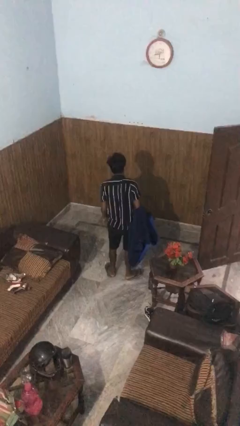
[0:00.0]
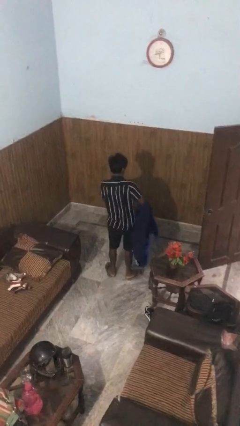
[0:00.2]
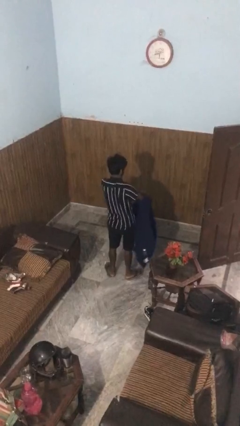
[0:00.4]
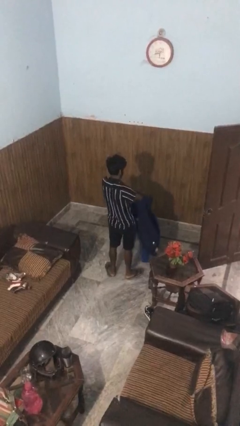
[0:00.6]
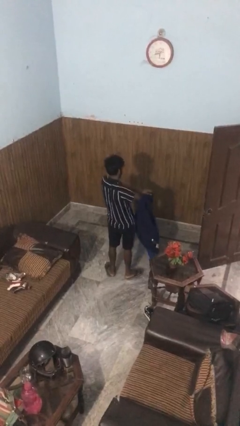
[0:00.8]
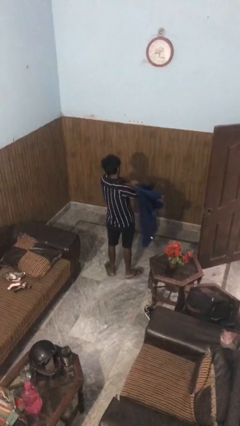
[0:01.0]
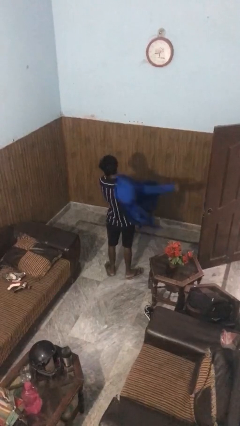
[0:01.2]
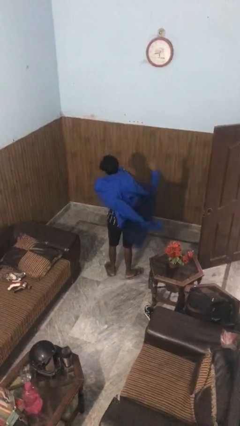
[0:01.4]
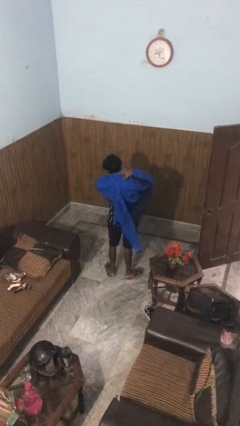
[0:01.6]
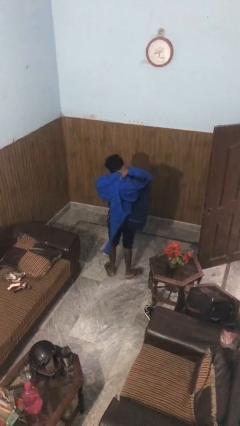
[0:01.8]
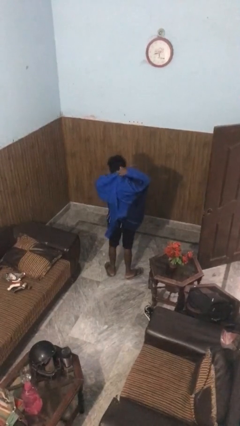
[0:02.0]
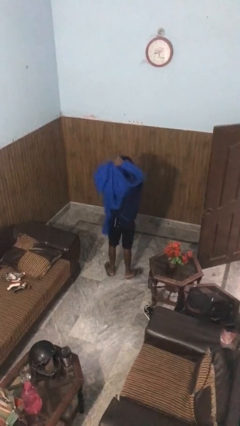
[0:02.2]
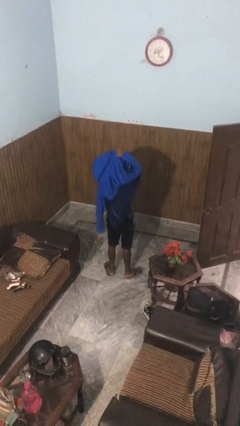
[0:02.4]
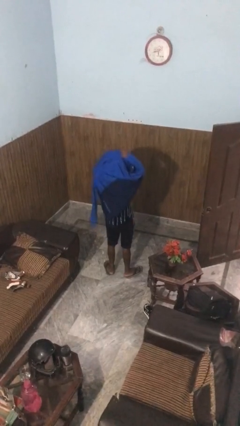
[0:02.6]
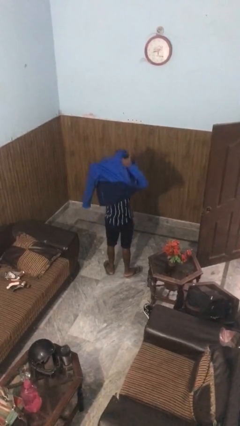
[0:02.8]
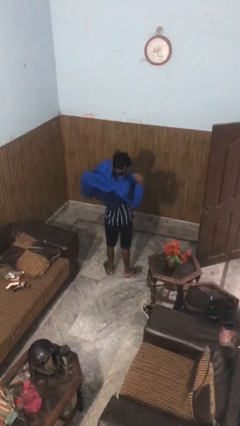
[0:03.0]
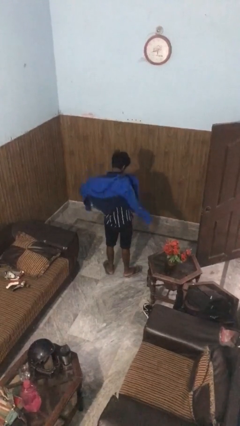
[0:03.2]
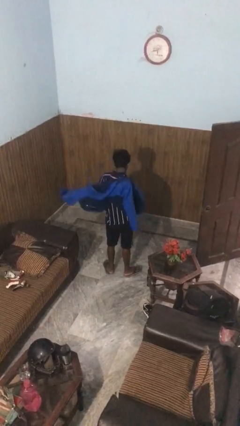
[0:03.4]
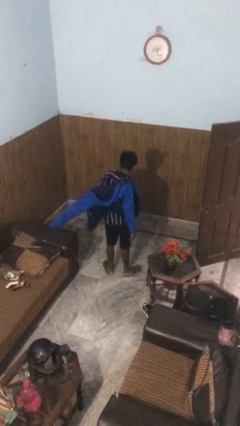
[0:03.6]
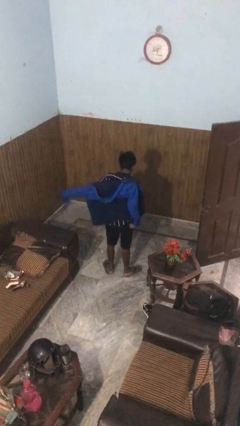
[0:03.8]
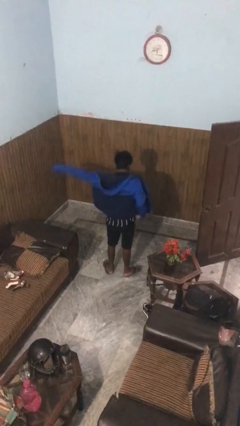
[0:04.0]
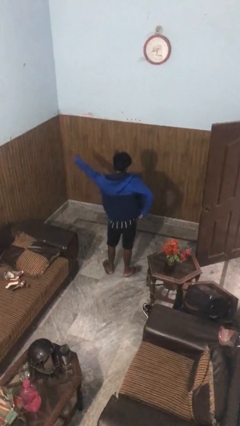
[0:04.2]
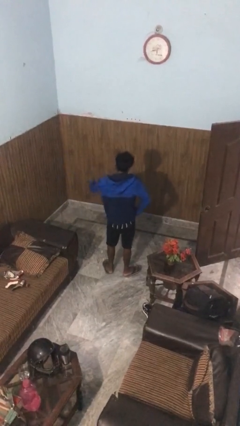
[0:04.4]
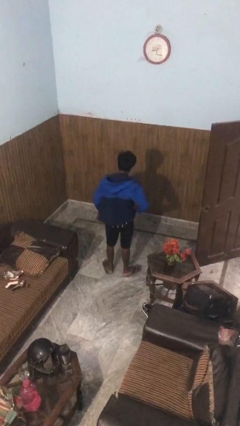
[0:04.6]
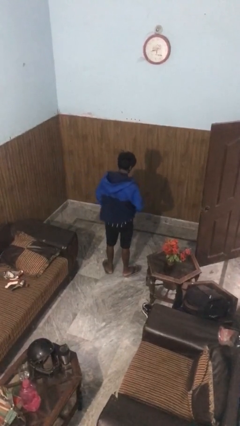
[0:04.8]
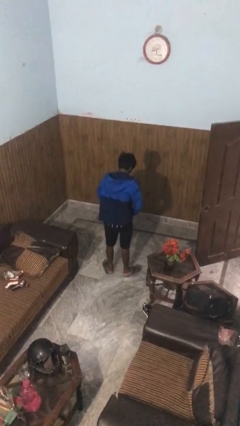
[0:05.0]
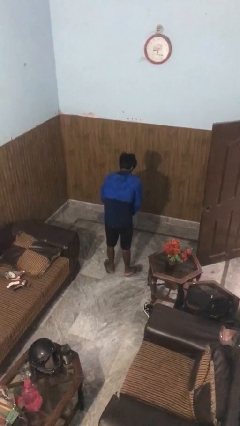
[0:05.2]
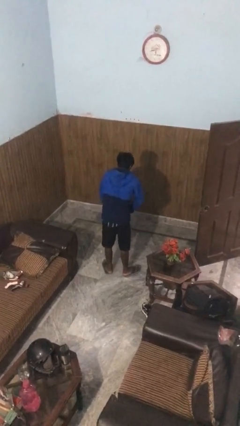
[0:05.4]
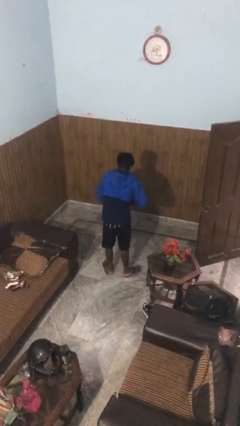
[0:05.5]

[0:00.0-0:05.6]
person puts on jacket

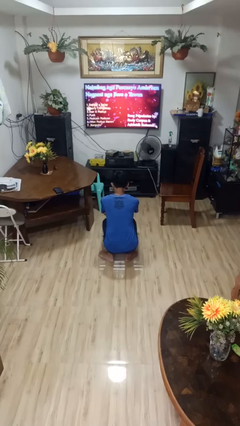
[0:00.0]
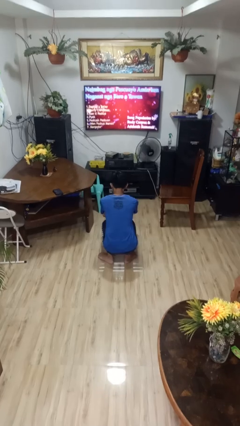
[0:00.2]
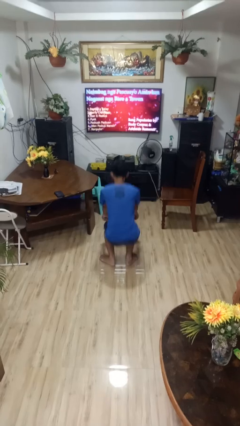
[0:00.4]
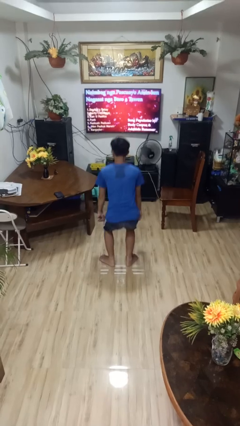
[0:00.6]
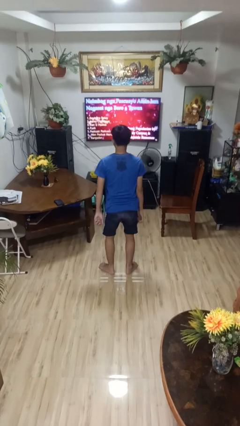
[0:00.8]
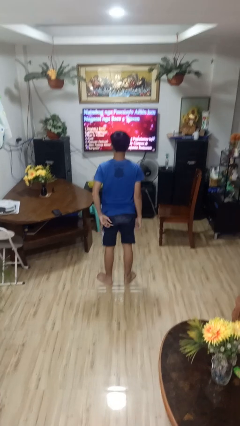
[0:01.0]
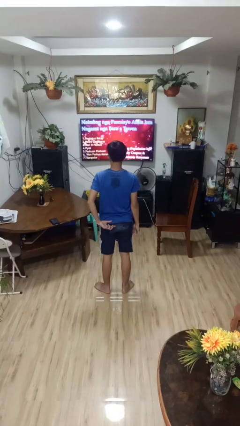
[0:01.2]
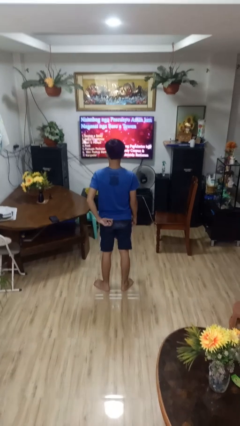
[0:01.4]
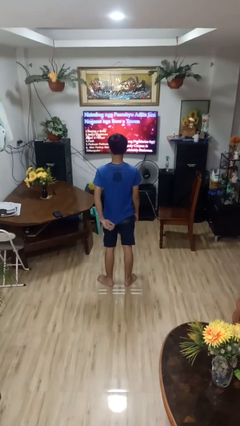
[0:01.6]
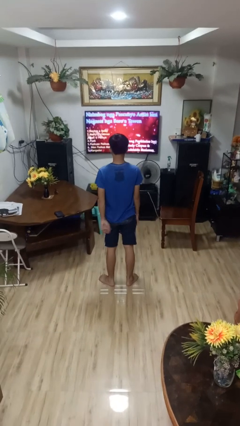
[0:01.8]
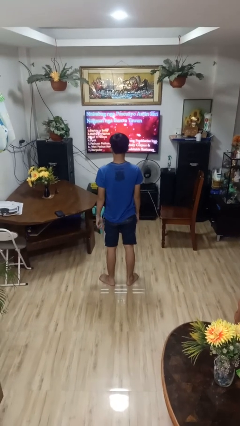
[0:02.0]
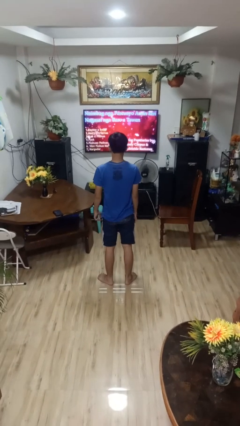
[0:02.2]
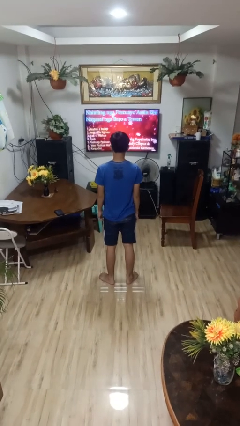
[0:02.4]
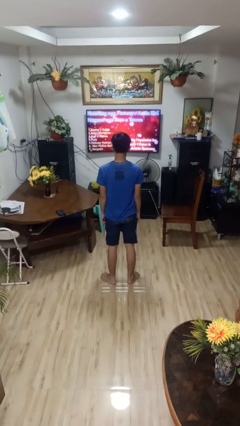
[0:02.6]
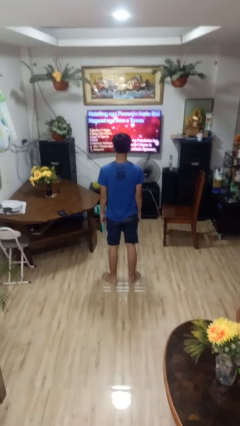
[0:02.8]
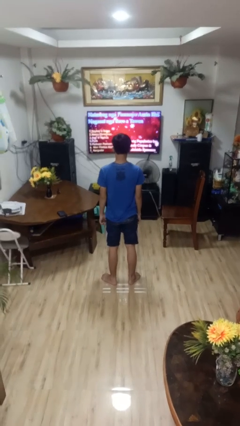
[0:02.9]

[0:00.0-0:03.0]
person stands up

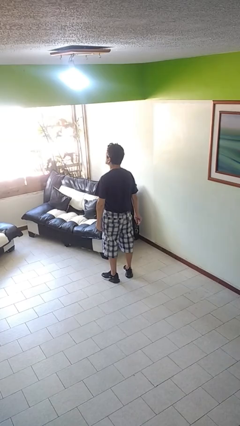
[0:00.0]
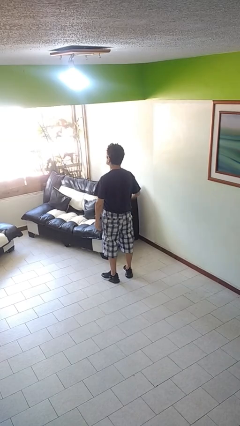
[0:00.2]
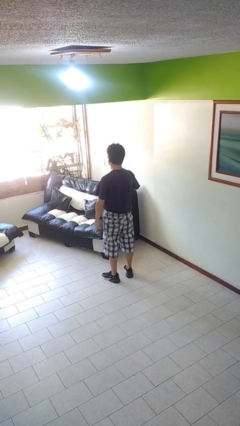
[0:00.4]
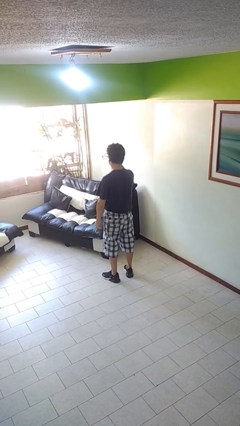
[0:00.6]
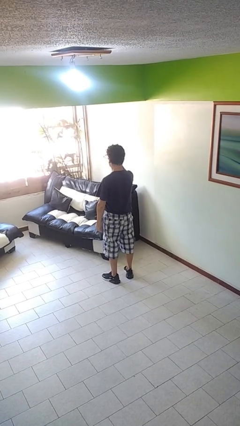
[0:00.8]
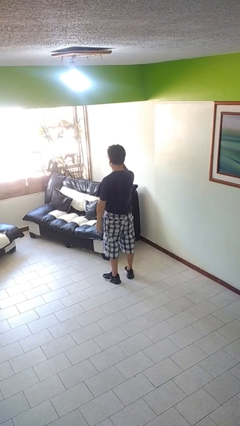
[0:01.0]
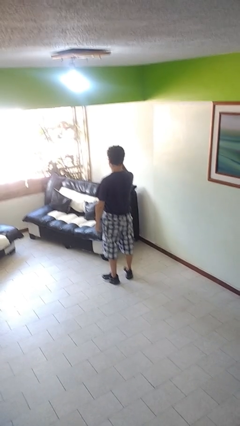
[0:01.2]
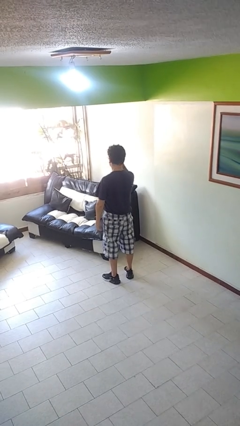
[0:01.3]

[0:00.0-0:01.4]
person puts on glasses

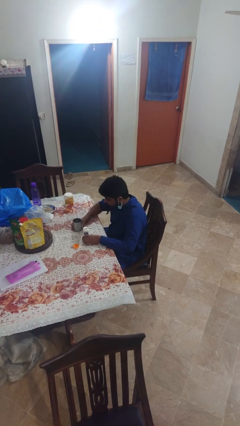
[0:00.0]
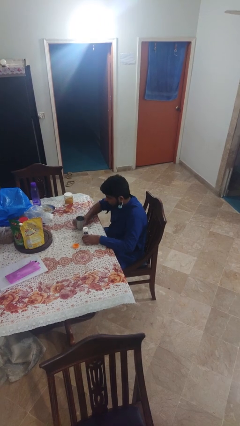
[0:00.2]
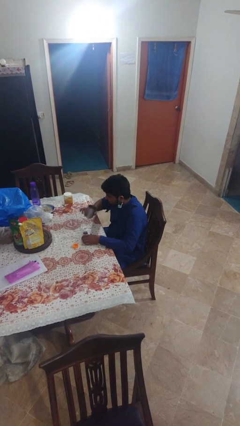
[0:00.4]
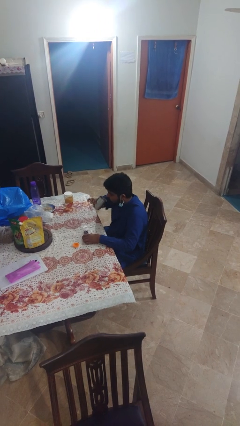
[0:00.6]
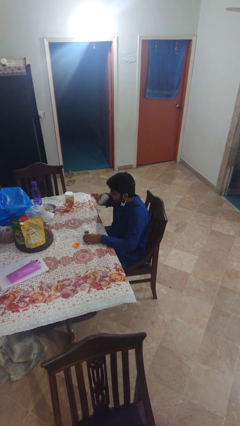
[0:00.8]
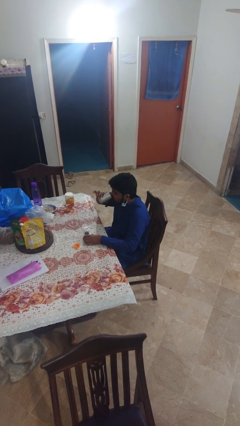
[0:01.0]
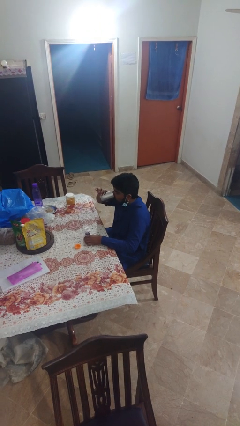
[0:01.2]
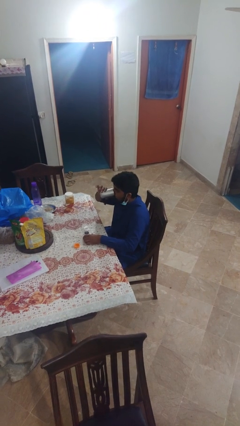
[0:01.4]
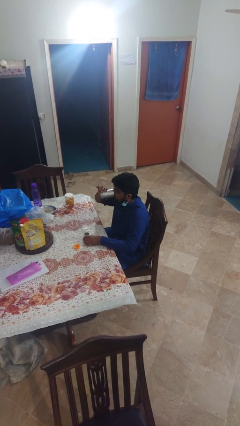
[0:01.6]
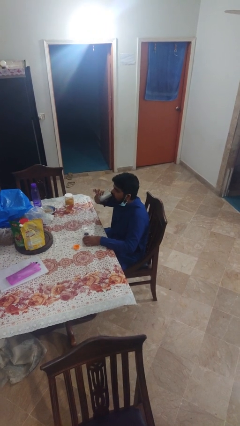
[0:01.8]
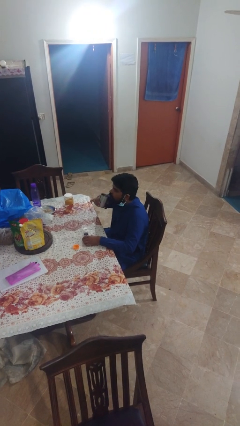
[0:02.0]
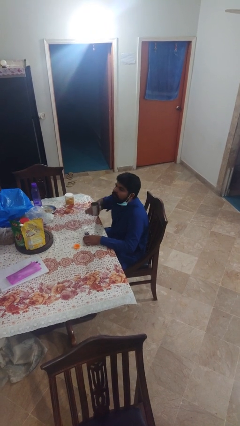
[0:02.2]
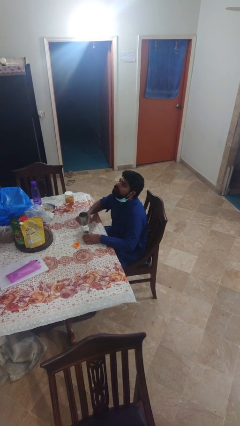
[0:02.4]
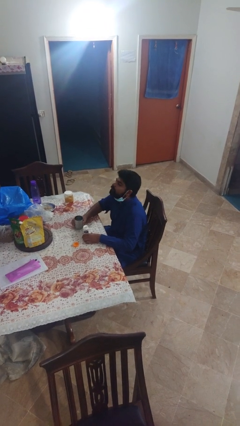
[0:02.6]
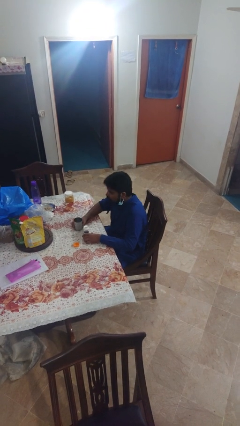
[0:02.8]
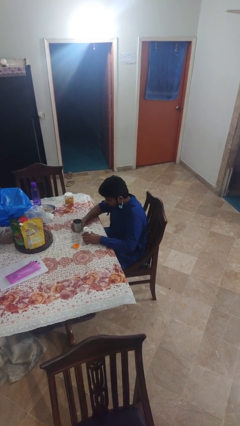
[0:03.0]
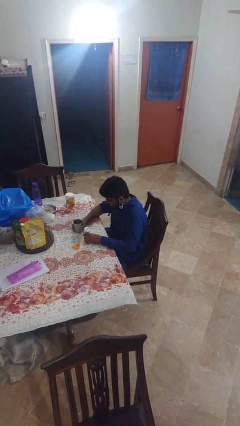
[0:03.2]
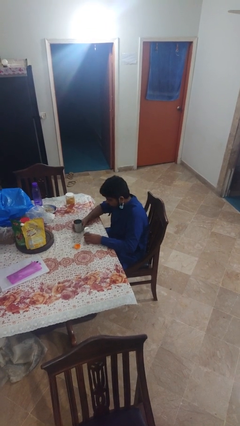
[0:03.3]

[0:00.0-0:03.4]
person drinks from cup

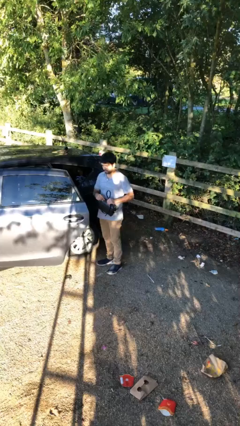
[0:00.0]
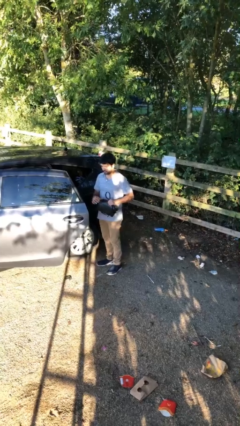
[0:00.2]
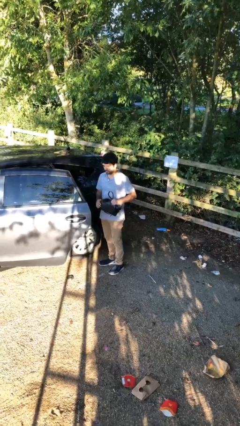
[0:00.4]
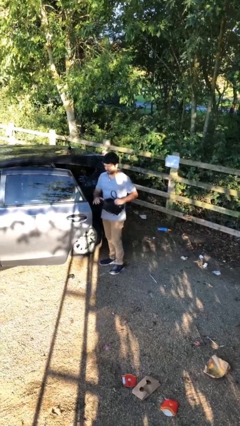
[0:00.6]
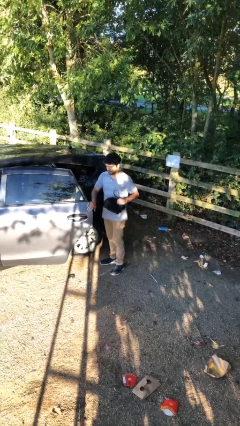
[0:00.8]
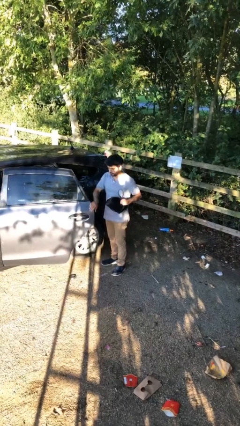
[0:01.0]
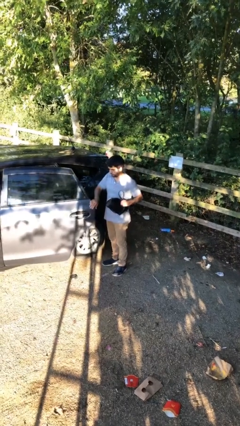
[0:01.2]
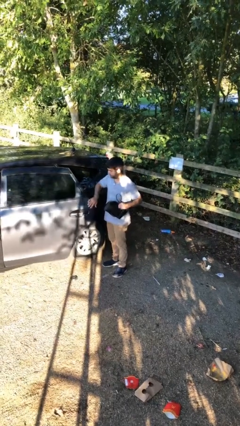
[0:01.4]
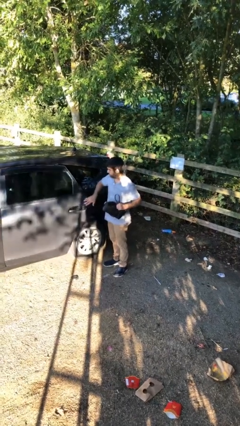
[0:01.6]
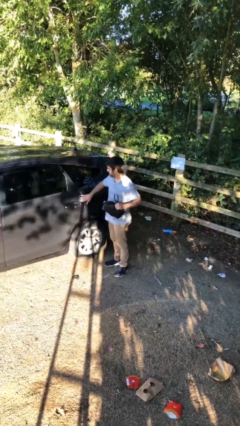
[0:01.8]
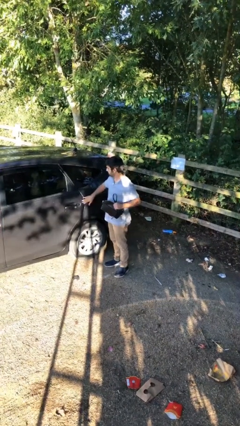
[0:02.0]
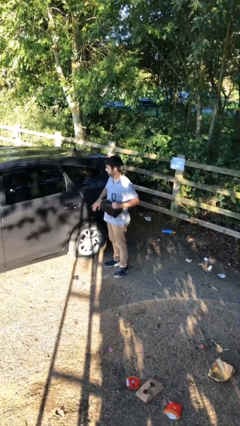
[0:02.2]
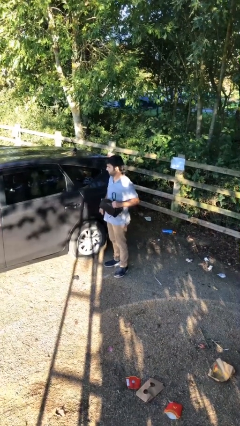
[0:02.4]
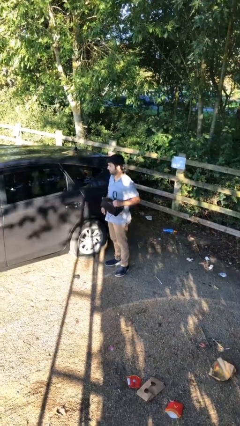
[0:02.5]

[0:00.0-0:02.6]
person closes car door

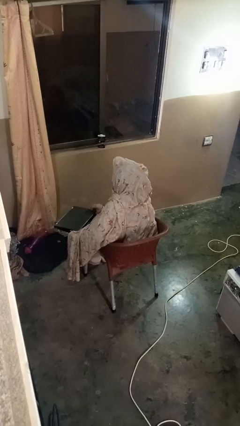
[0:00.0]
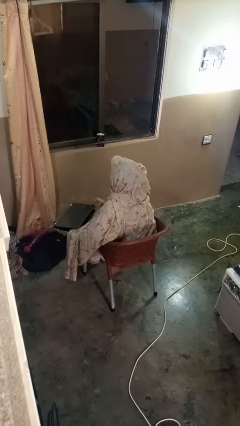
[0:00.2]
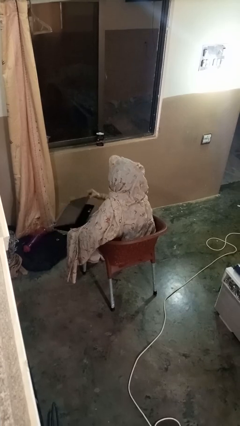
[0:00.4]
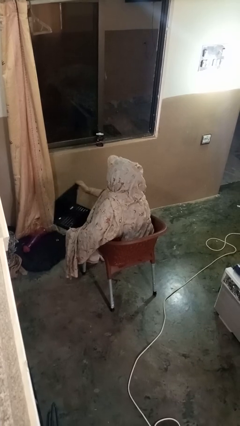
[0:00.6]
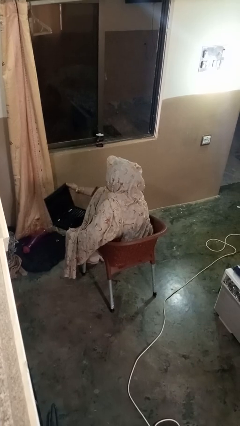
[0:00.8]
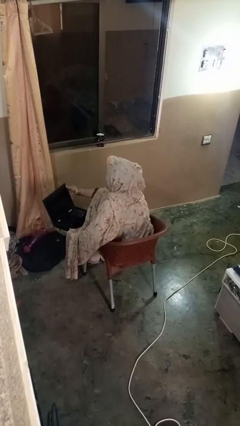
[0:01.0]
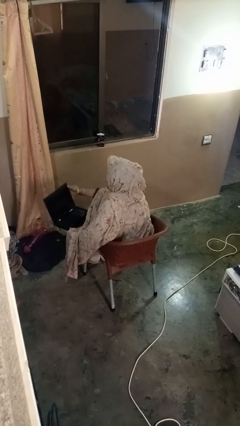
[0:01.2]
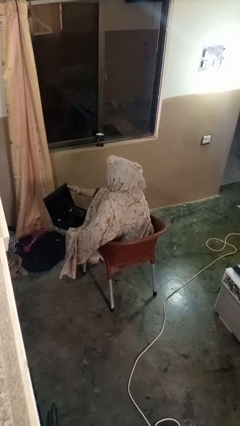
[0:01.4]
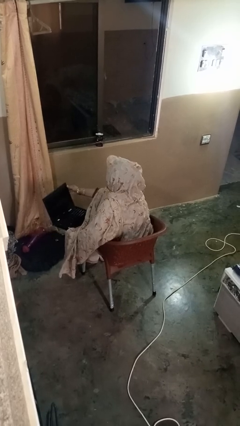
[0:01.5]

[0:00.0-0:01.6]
person opens laptop
